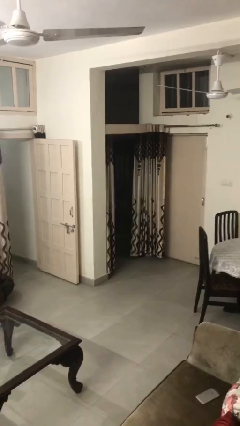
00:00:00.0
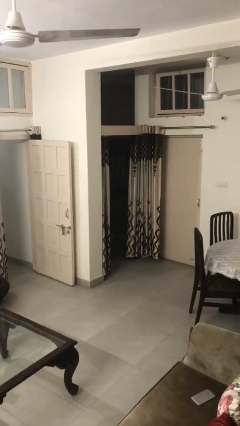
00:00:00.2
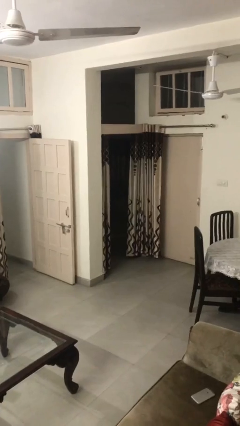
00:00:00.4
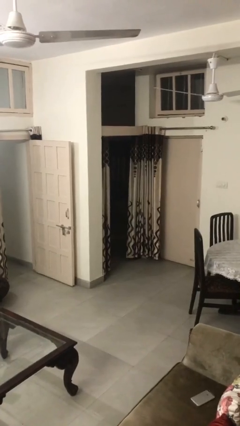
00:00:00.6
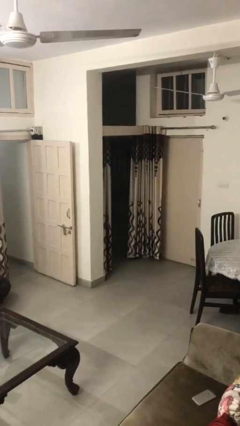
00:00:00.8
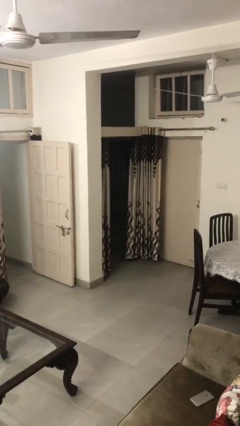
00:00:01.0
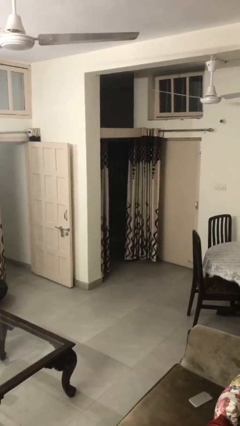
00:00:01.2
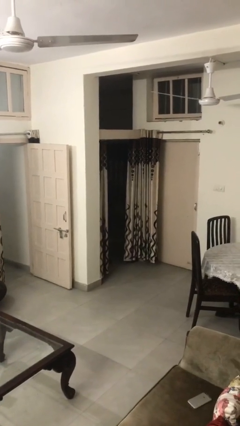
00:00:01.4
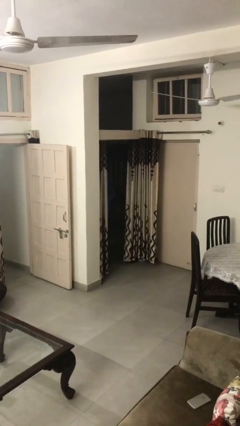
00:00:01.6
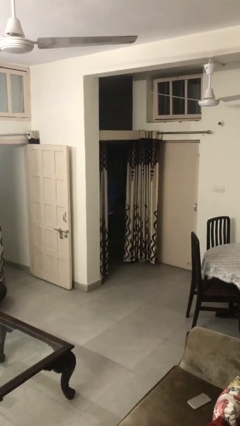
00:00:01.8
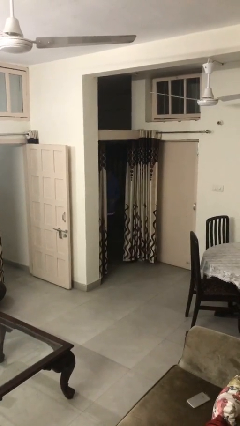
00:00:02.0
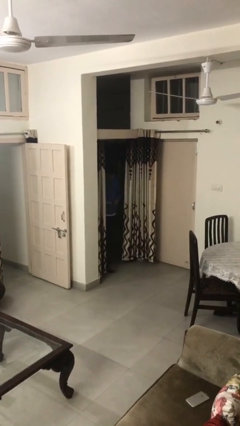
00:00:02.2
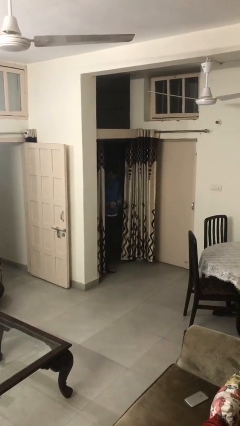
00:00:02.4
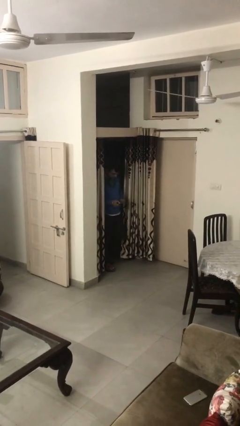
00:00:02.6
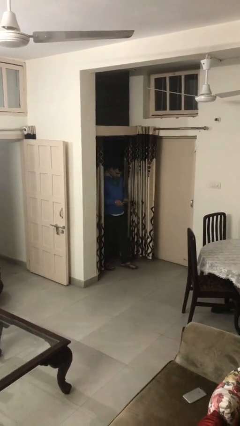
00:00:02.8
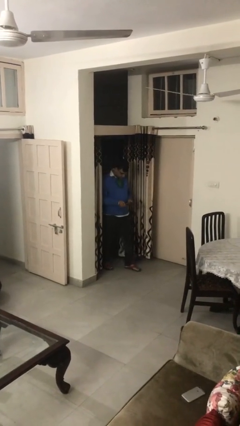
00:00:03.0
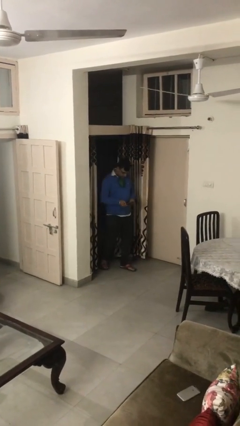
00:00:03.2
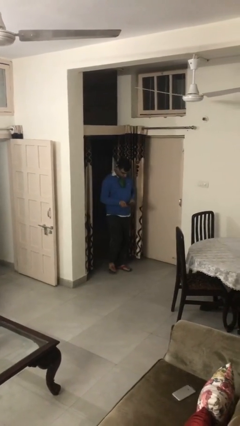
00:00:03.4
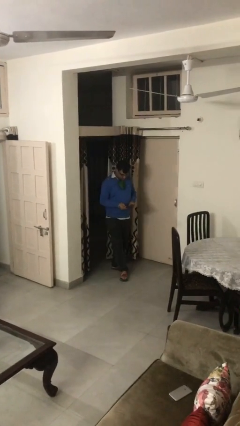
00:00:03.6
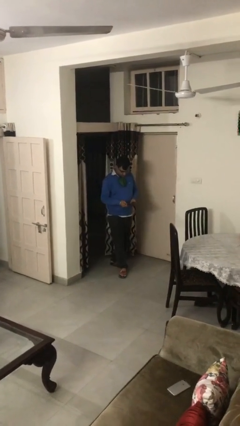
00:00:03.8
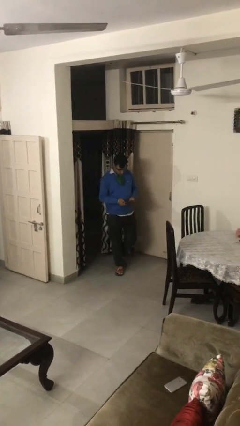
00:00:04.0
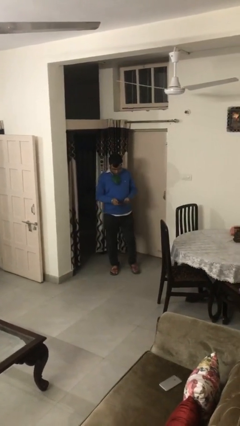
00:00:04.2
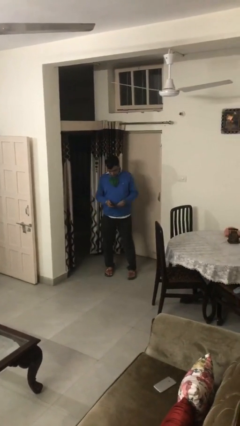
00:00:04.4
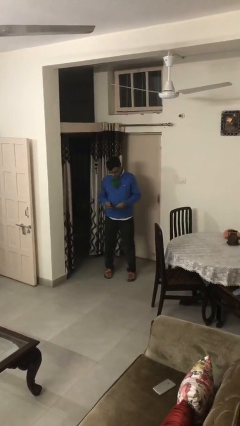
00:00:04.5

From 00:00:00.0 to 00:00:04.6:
person enters scene through structure

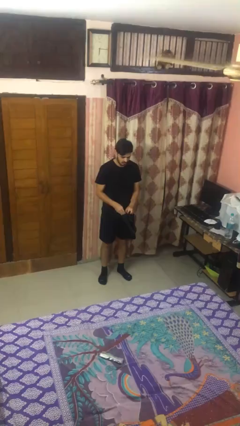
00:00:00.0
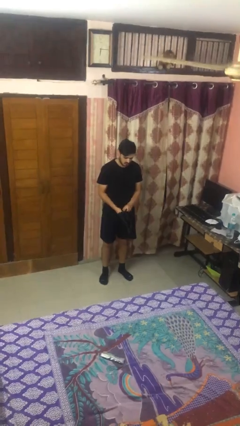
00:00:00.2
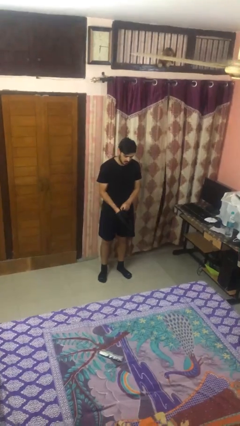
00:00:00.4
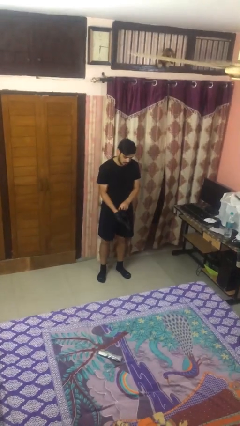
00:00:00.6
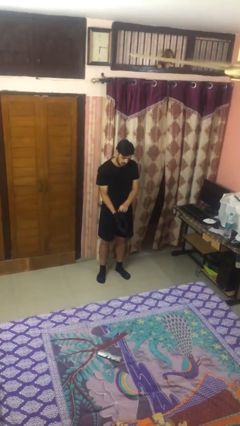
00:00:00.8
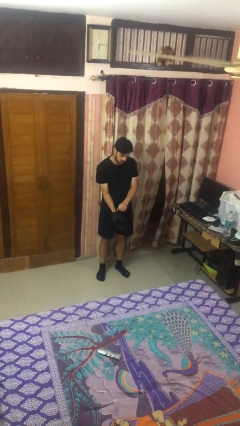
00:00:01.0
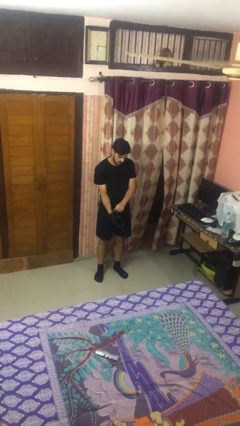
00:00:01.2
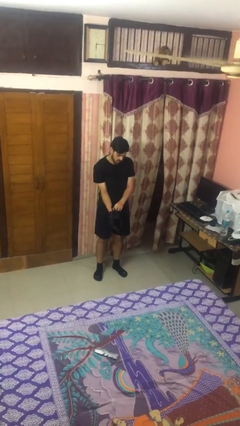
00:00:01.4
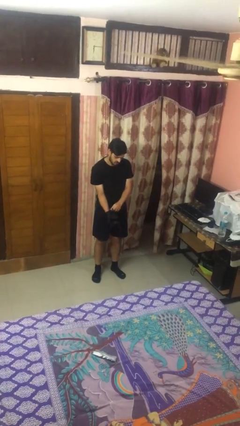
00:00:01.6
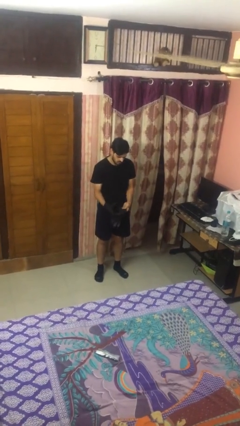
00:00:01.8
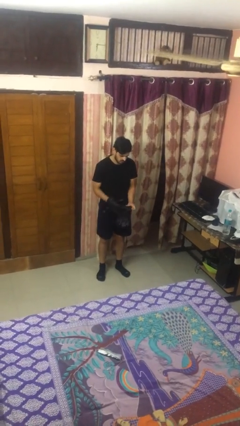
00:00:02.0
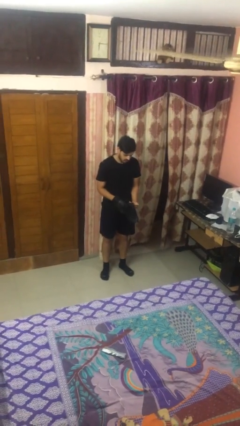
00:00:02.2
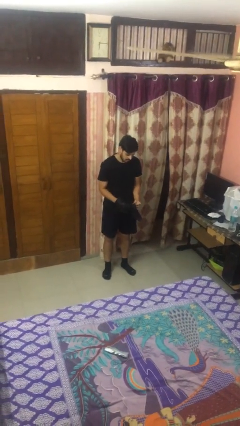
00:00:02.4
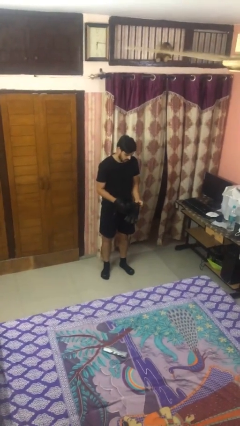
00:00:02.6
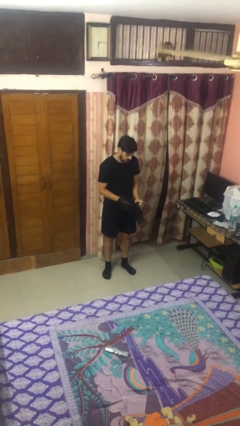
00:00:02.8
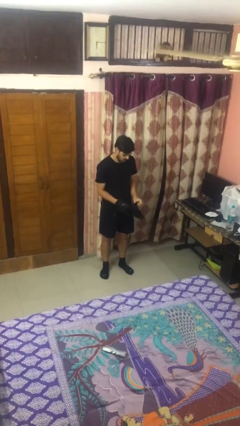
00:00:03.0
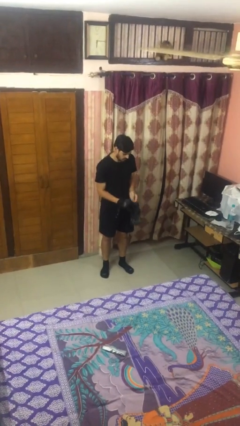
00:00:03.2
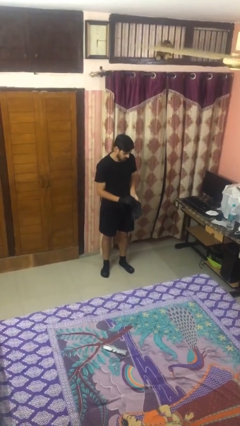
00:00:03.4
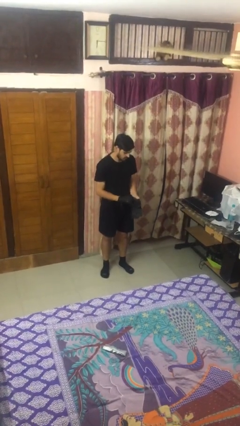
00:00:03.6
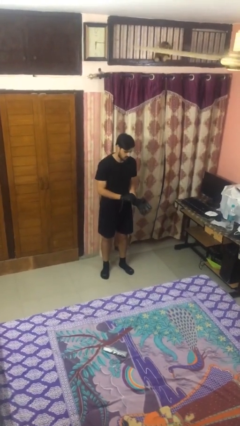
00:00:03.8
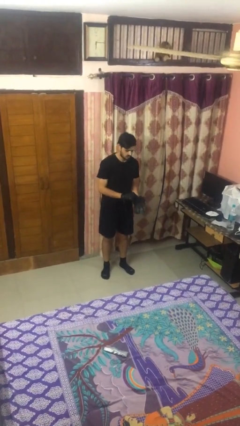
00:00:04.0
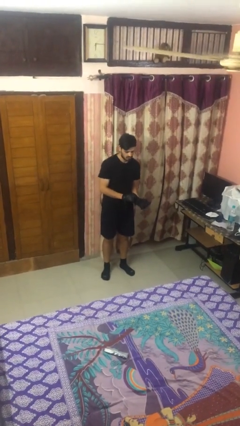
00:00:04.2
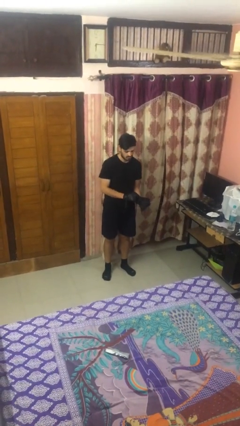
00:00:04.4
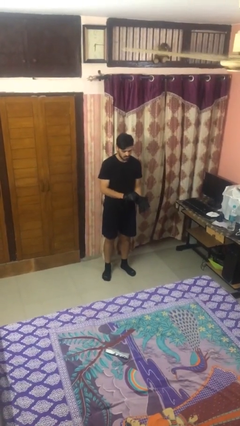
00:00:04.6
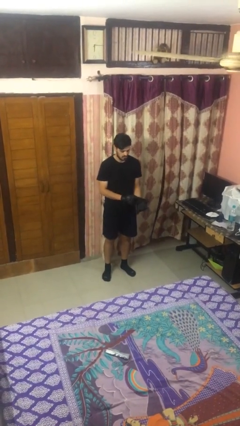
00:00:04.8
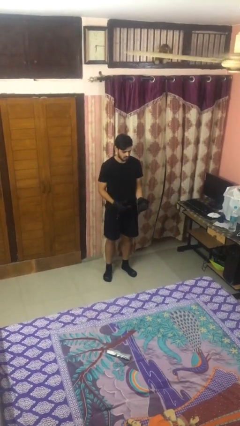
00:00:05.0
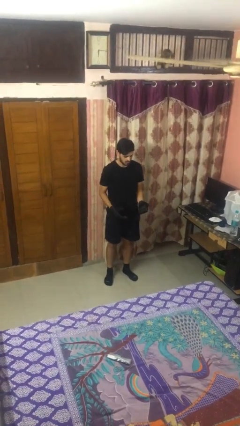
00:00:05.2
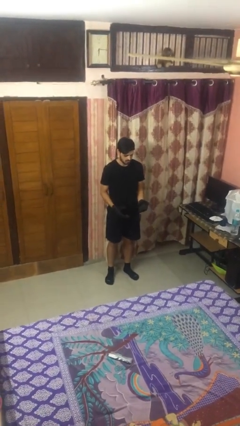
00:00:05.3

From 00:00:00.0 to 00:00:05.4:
person puts on gloves

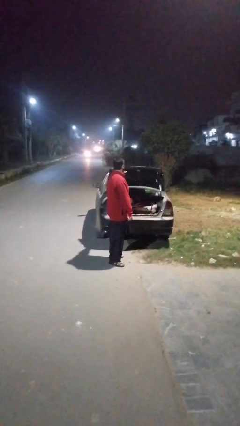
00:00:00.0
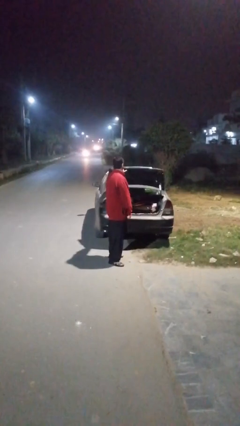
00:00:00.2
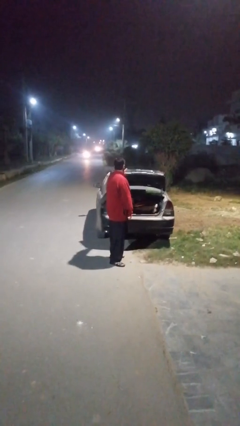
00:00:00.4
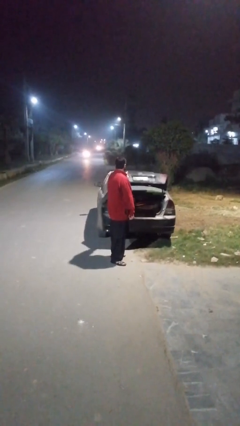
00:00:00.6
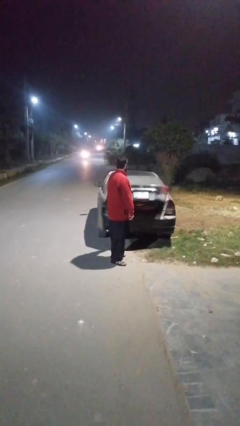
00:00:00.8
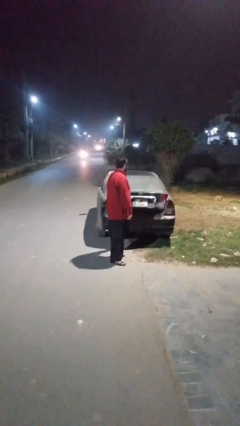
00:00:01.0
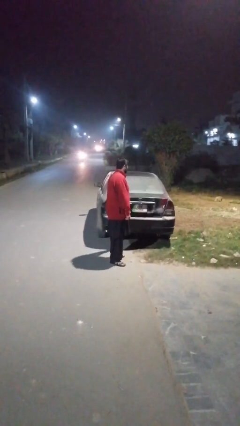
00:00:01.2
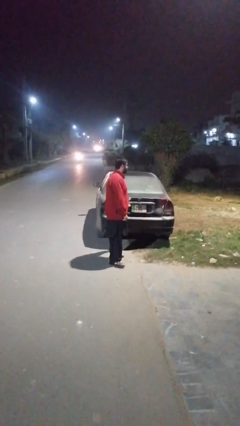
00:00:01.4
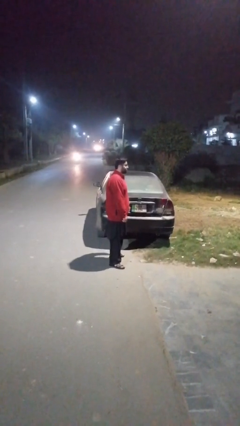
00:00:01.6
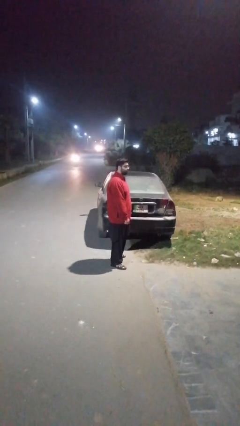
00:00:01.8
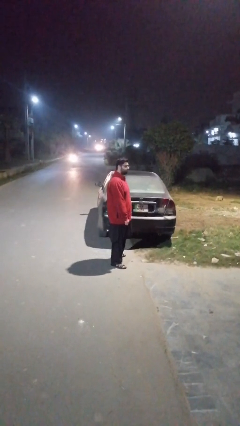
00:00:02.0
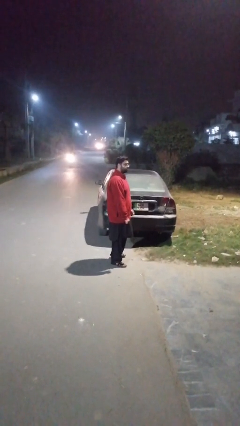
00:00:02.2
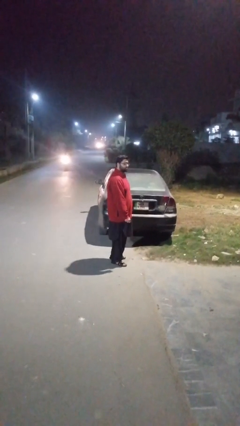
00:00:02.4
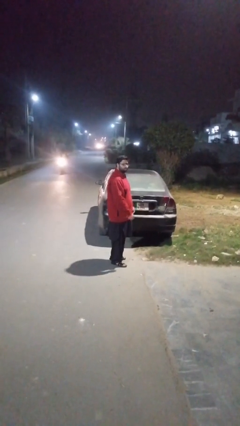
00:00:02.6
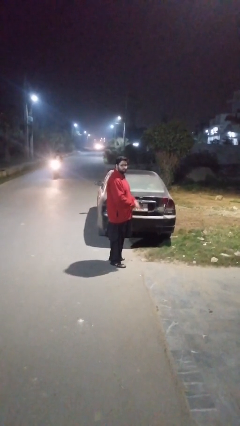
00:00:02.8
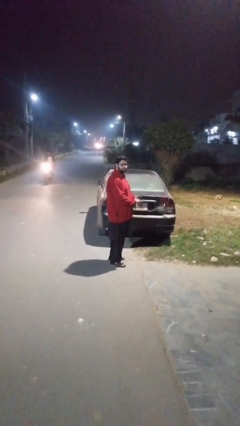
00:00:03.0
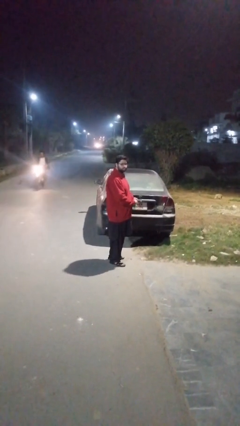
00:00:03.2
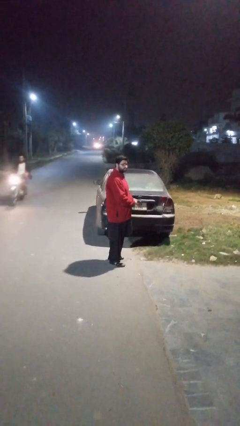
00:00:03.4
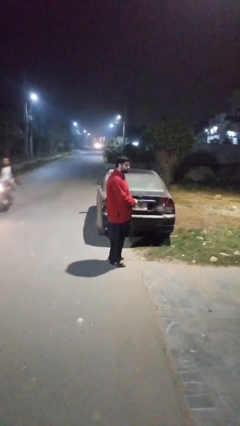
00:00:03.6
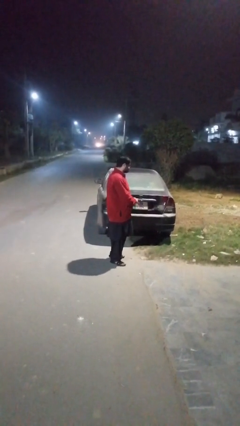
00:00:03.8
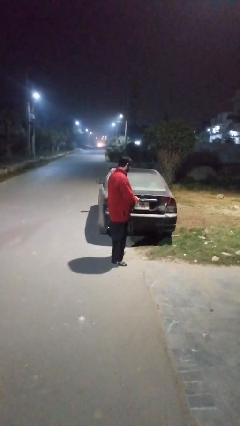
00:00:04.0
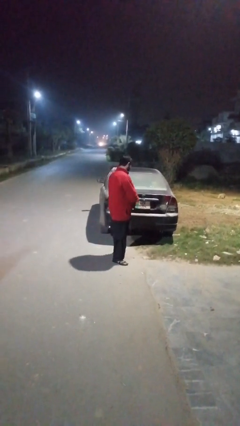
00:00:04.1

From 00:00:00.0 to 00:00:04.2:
person closes car trunk

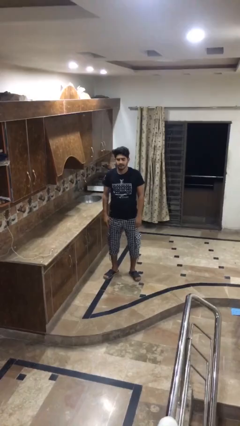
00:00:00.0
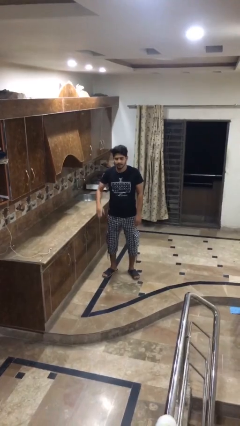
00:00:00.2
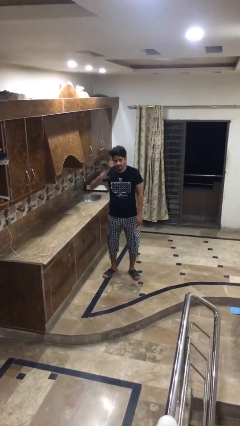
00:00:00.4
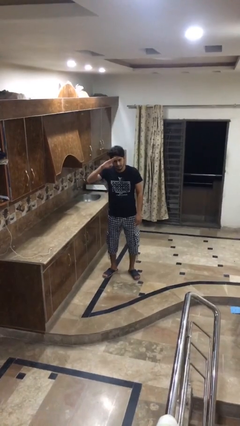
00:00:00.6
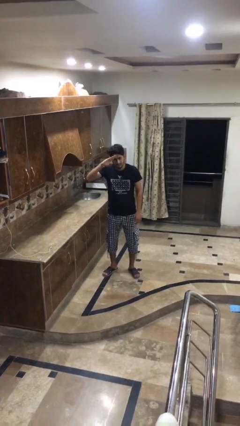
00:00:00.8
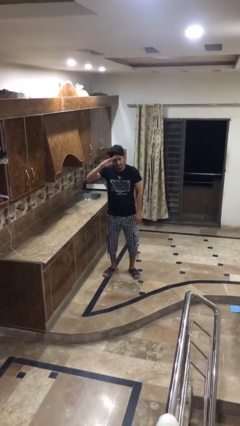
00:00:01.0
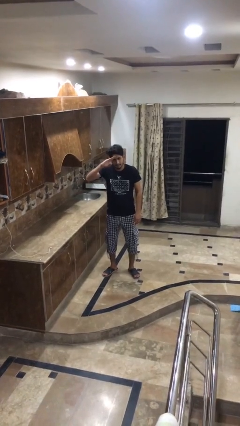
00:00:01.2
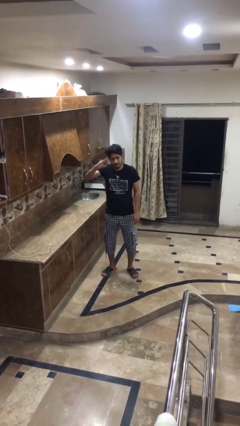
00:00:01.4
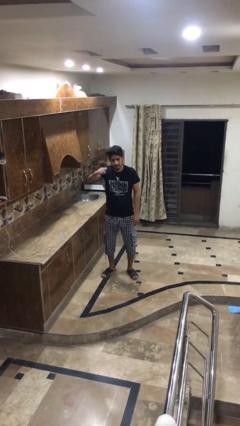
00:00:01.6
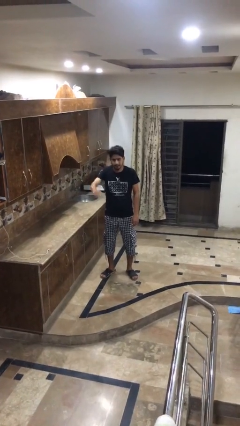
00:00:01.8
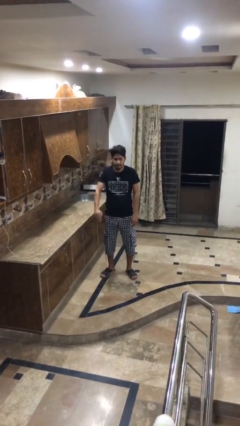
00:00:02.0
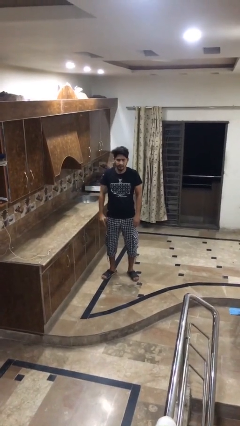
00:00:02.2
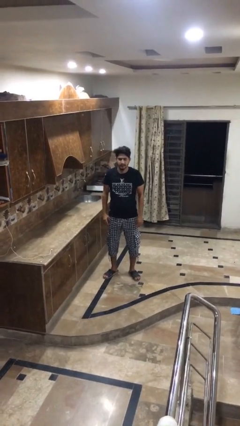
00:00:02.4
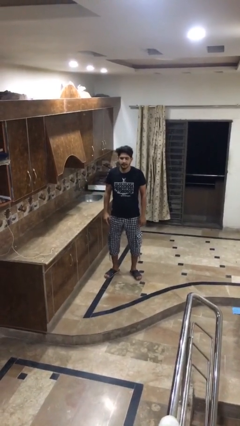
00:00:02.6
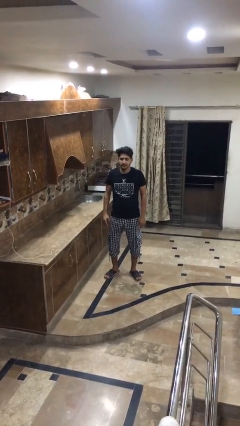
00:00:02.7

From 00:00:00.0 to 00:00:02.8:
person salutes

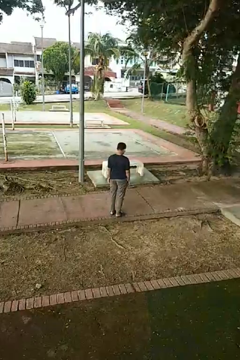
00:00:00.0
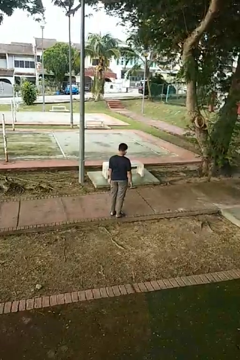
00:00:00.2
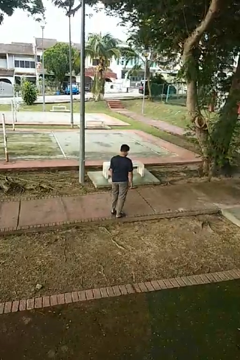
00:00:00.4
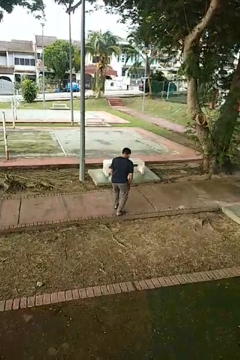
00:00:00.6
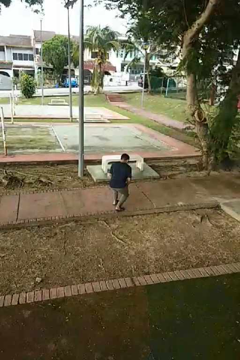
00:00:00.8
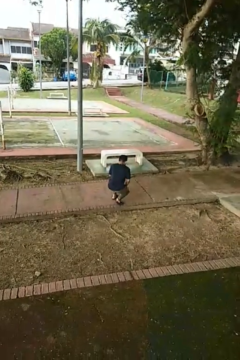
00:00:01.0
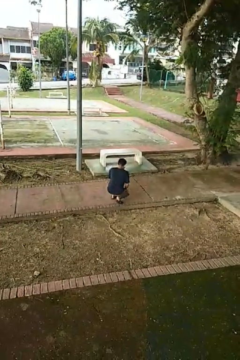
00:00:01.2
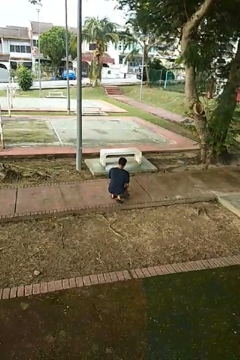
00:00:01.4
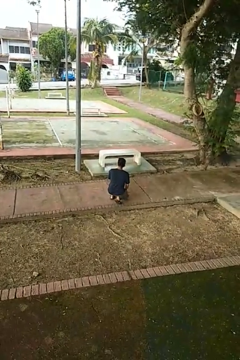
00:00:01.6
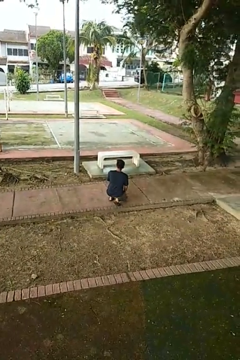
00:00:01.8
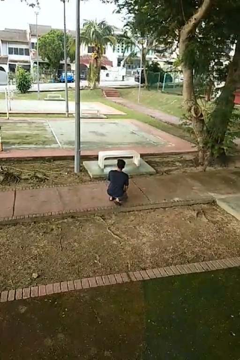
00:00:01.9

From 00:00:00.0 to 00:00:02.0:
person kneels
